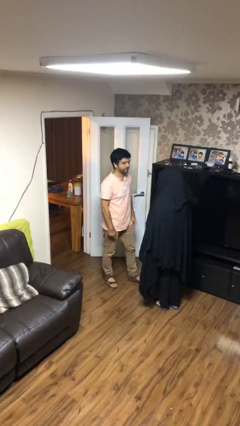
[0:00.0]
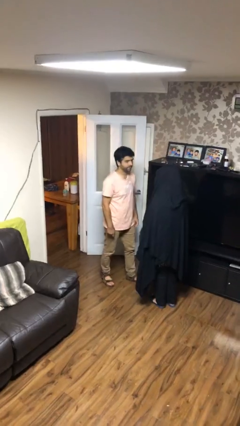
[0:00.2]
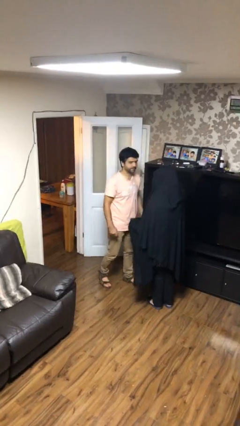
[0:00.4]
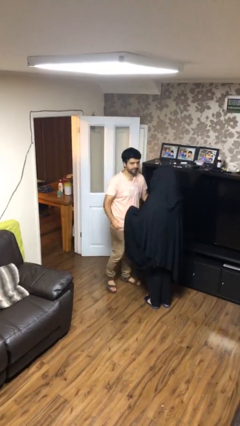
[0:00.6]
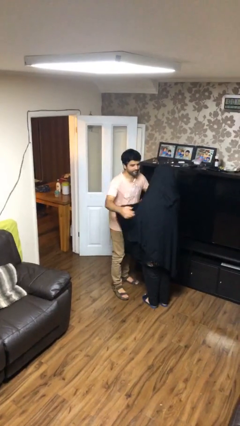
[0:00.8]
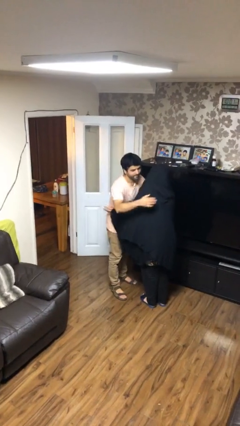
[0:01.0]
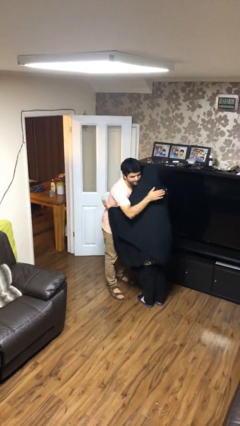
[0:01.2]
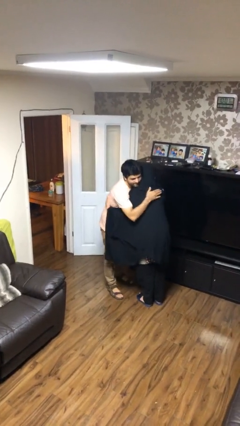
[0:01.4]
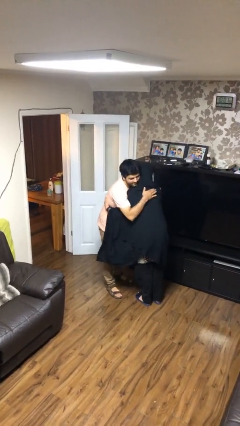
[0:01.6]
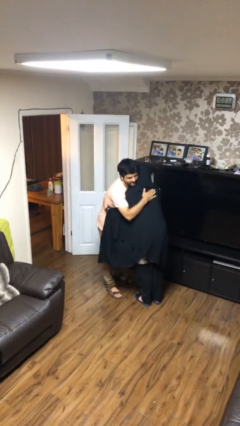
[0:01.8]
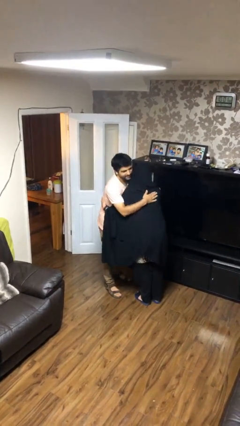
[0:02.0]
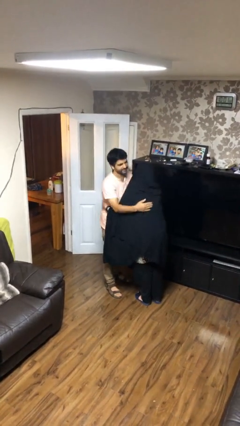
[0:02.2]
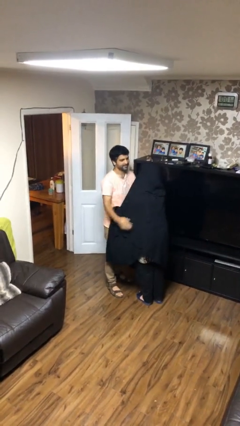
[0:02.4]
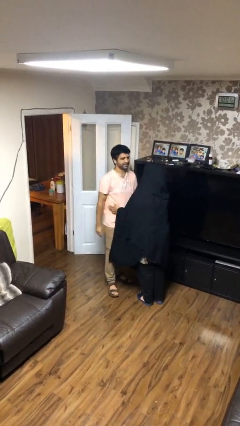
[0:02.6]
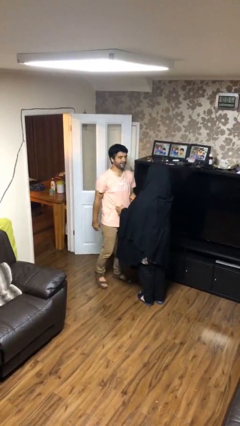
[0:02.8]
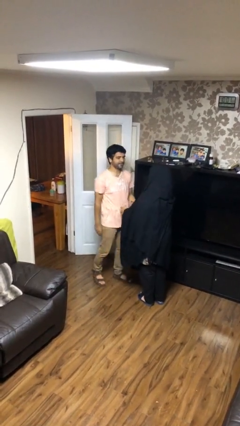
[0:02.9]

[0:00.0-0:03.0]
person embraces person

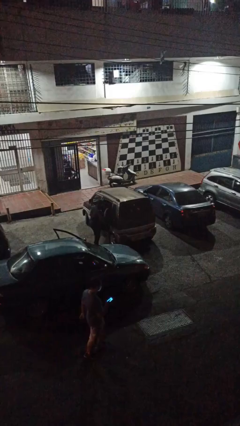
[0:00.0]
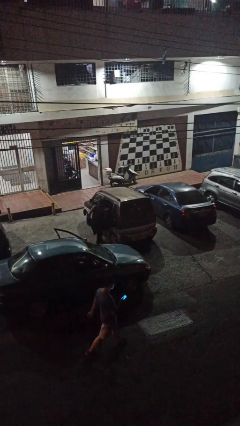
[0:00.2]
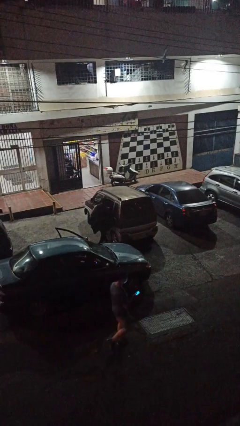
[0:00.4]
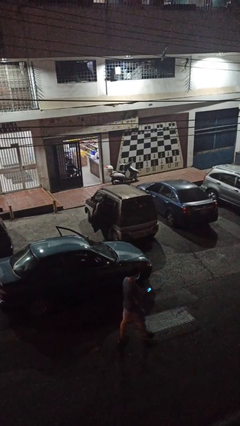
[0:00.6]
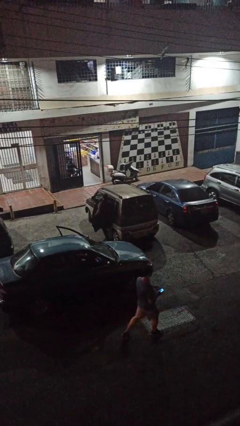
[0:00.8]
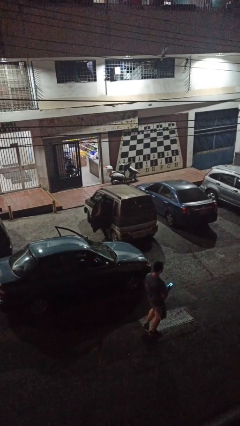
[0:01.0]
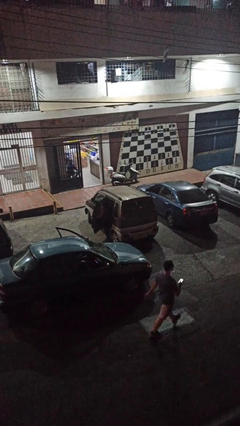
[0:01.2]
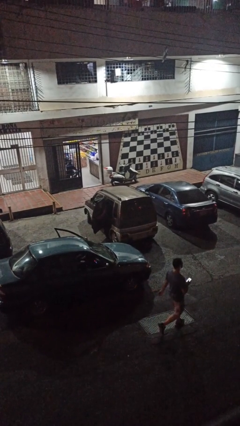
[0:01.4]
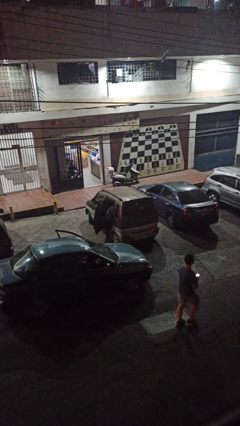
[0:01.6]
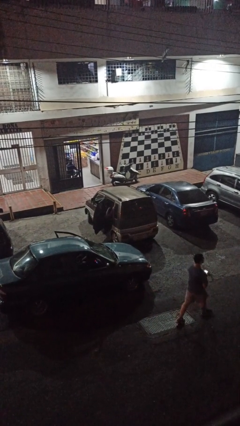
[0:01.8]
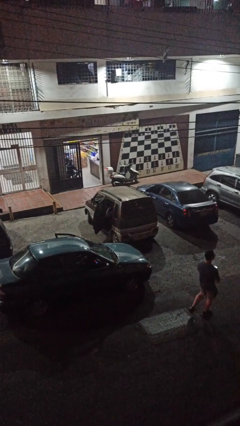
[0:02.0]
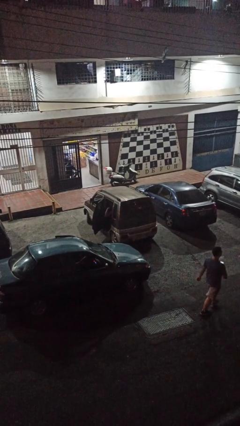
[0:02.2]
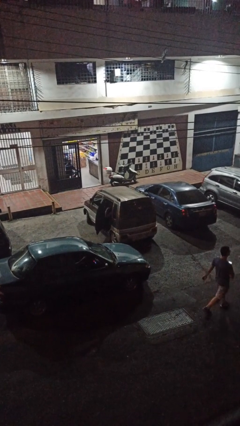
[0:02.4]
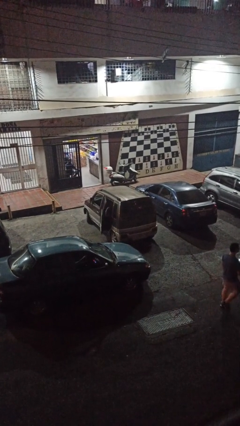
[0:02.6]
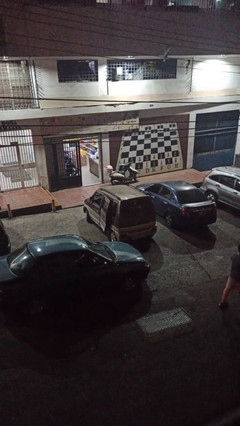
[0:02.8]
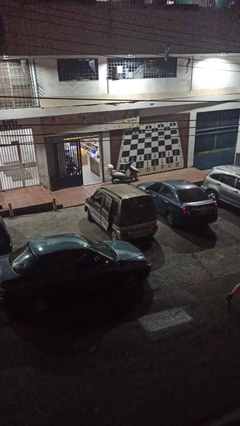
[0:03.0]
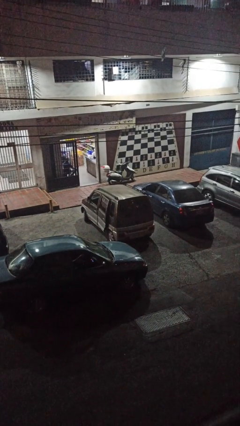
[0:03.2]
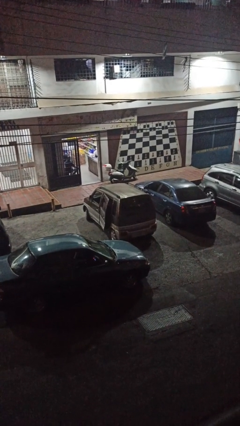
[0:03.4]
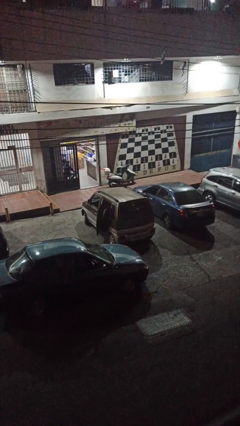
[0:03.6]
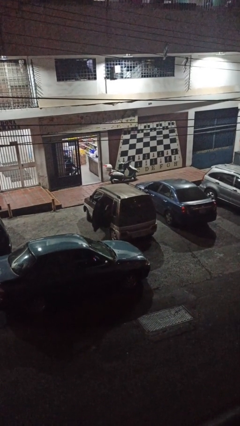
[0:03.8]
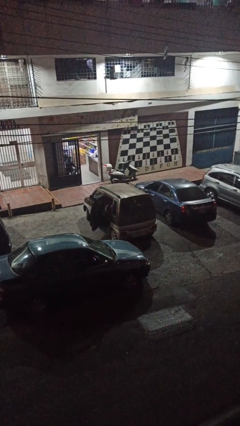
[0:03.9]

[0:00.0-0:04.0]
car picks up person

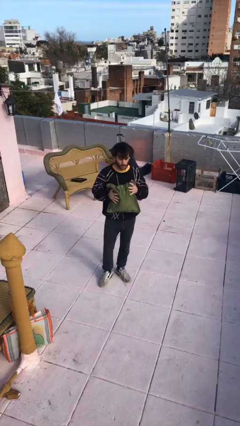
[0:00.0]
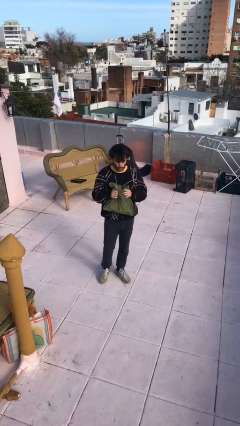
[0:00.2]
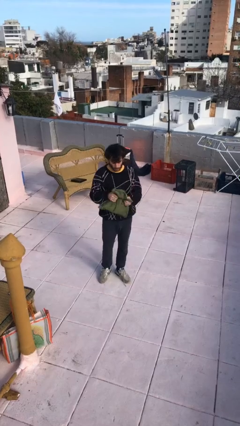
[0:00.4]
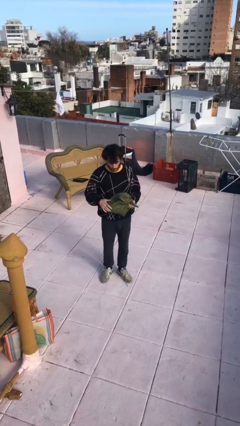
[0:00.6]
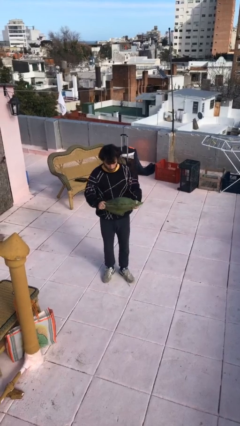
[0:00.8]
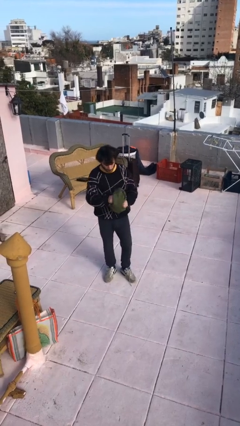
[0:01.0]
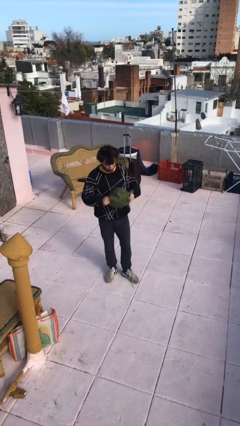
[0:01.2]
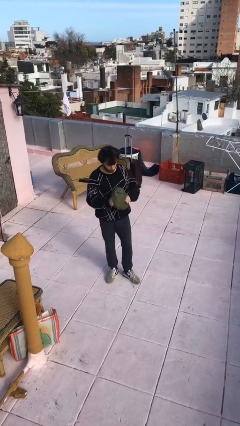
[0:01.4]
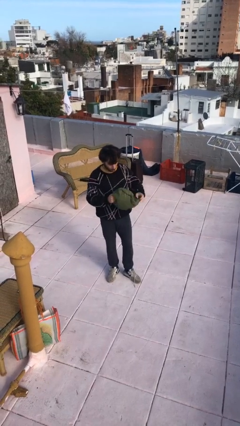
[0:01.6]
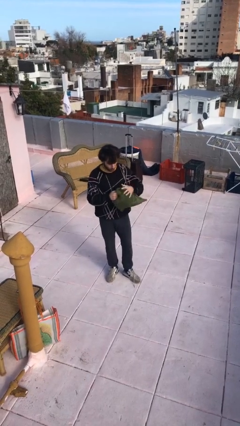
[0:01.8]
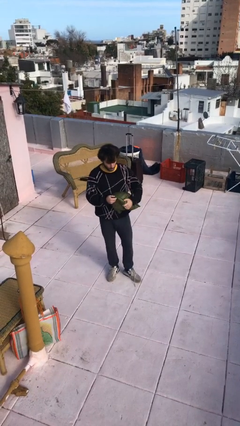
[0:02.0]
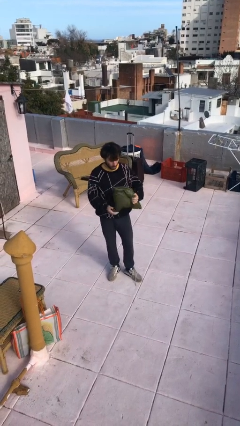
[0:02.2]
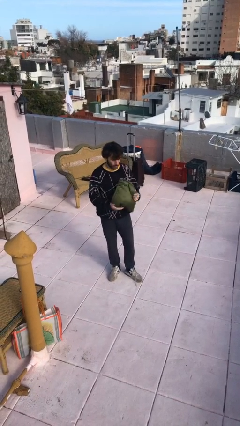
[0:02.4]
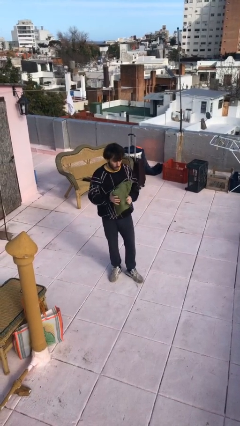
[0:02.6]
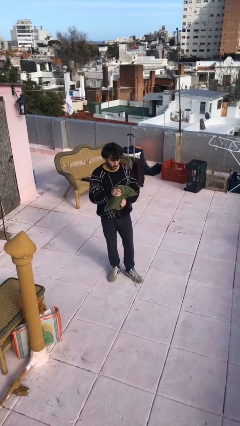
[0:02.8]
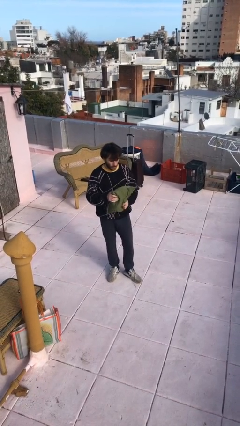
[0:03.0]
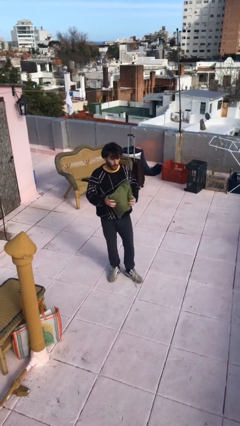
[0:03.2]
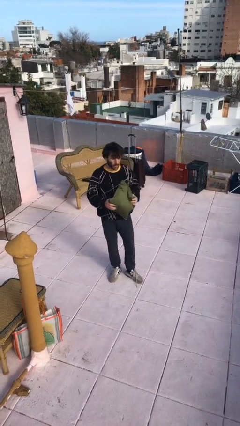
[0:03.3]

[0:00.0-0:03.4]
person squeezes object

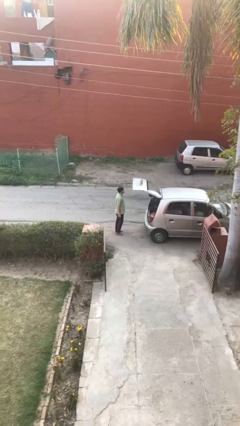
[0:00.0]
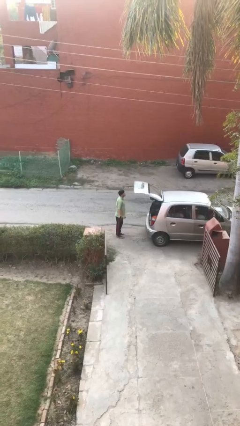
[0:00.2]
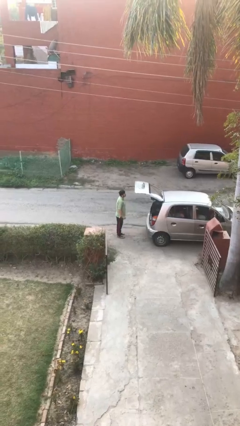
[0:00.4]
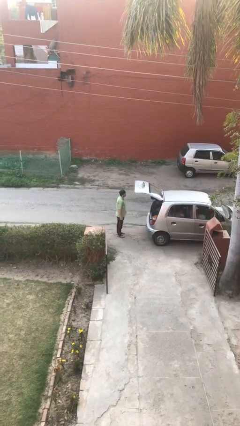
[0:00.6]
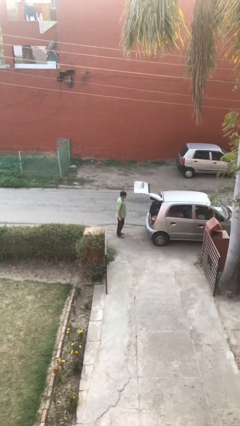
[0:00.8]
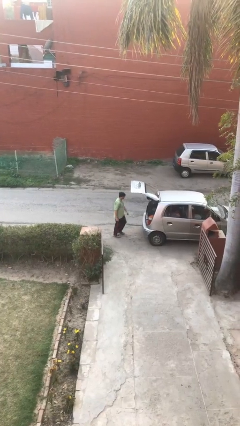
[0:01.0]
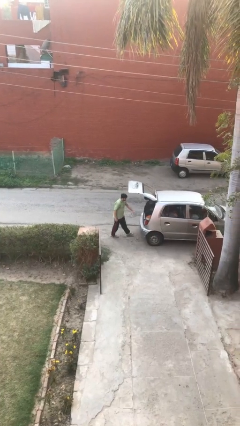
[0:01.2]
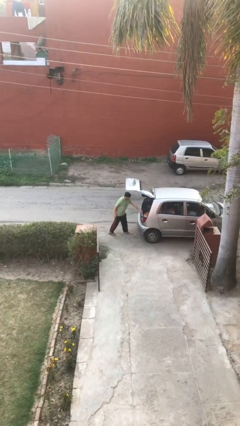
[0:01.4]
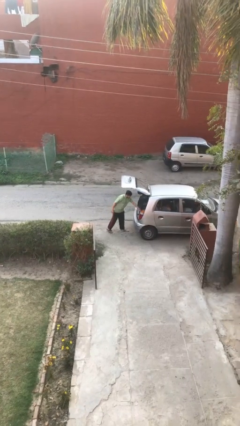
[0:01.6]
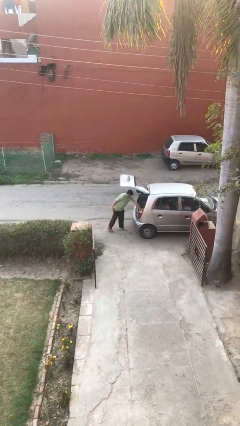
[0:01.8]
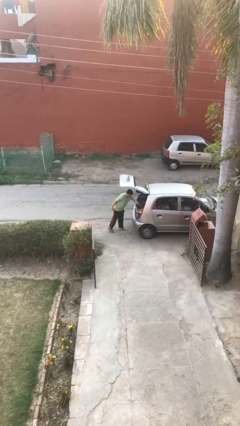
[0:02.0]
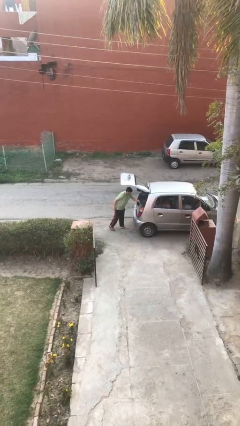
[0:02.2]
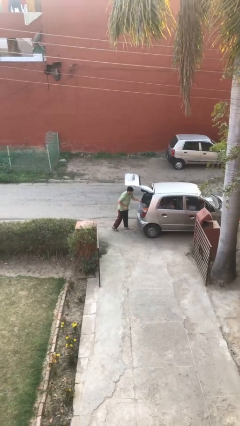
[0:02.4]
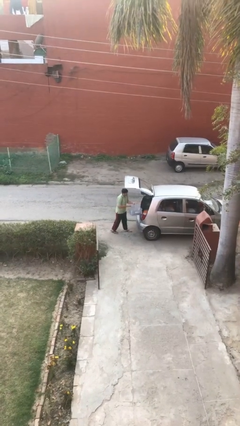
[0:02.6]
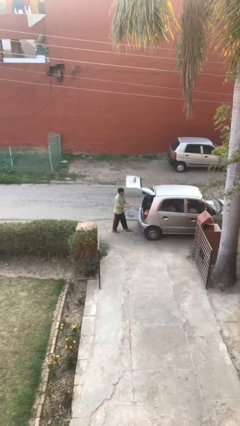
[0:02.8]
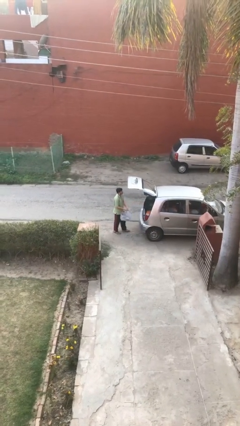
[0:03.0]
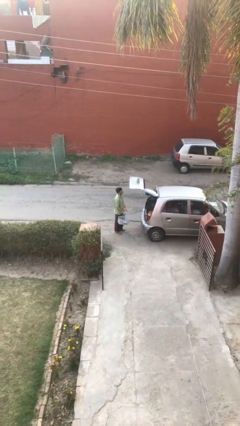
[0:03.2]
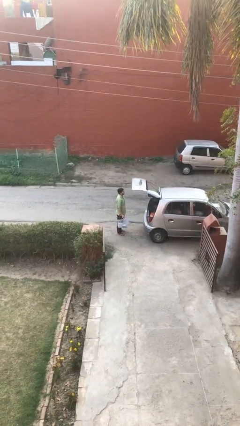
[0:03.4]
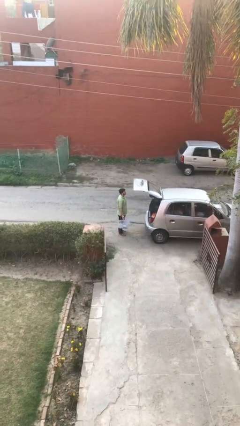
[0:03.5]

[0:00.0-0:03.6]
person unloads car

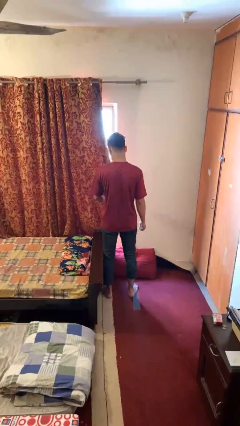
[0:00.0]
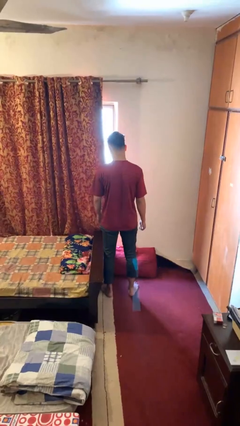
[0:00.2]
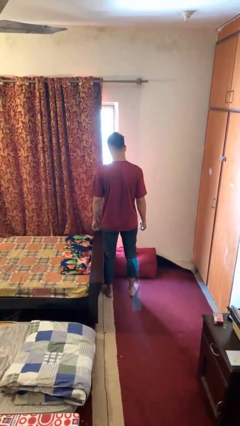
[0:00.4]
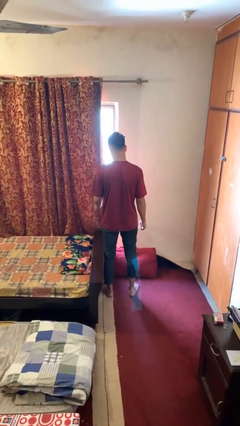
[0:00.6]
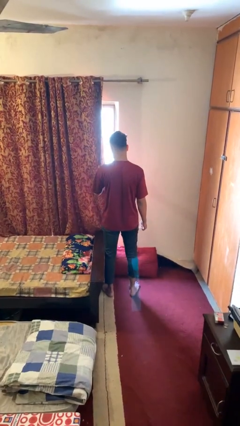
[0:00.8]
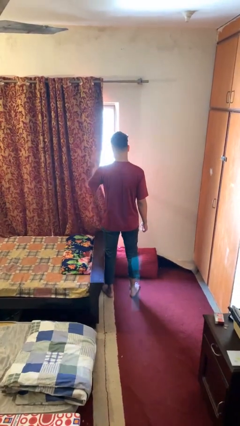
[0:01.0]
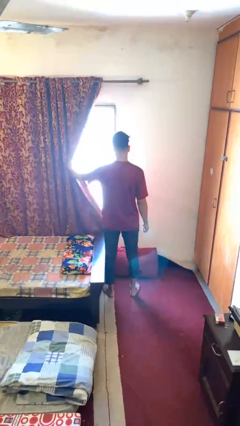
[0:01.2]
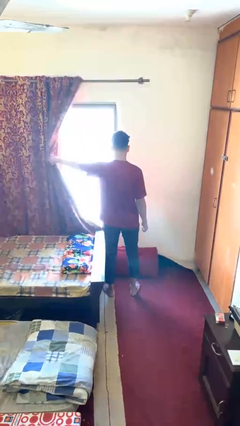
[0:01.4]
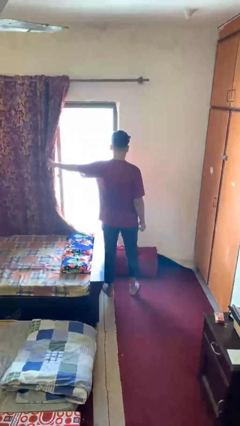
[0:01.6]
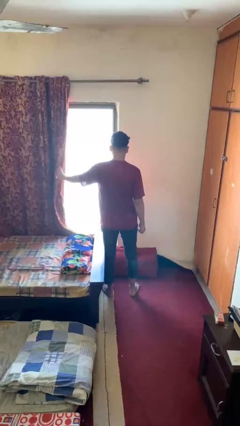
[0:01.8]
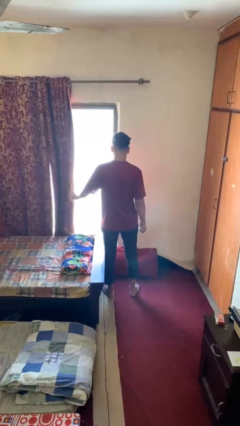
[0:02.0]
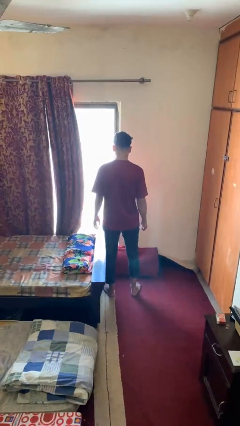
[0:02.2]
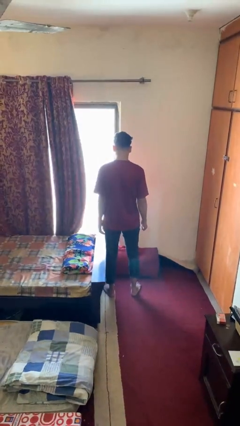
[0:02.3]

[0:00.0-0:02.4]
person opens curtains

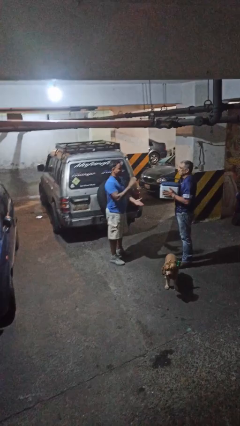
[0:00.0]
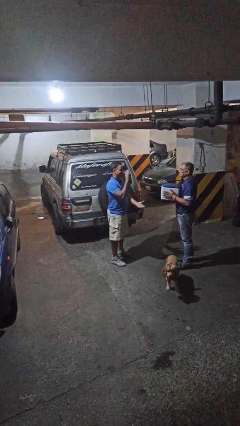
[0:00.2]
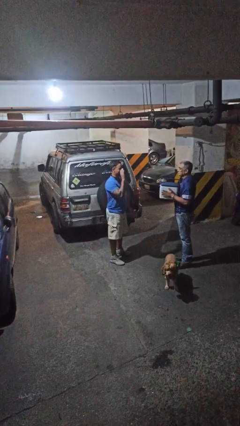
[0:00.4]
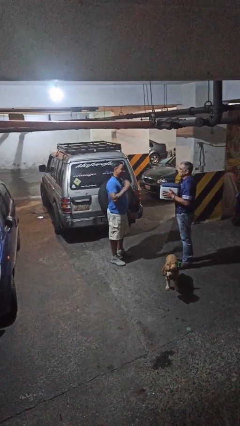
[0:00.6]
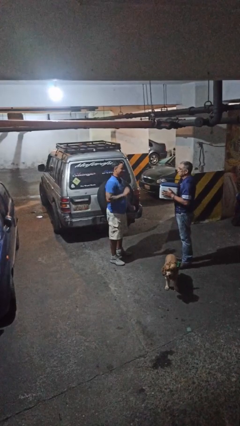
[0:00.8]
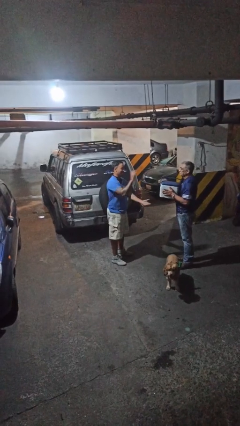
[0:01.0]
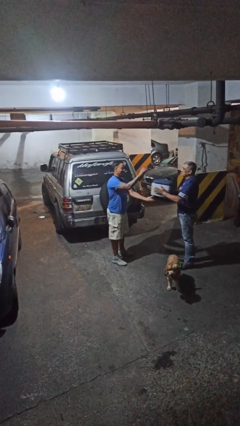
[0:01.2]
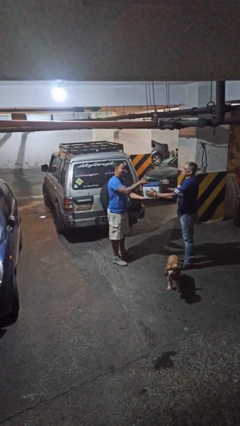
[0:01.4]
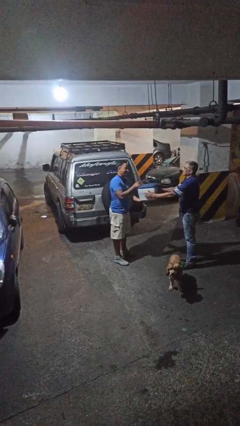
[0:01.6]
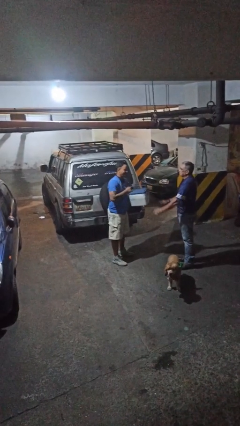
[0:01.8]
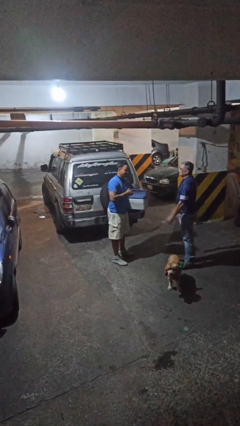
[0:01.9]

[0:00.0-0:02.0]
person transfers object to person
